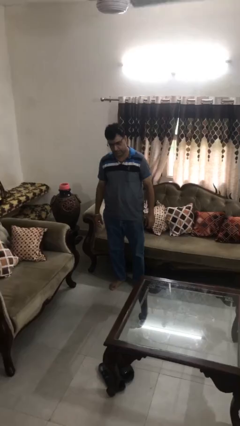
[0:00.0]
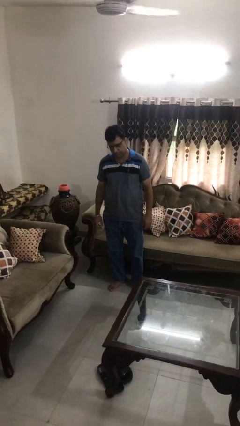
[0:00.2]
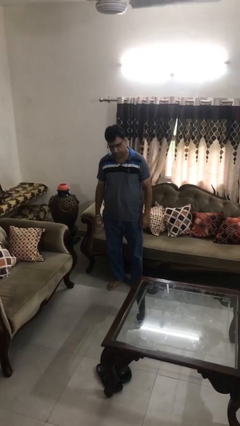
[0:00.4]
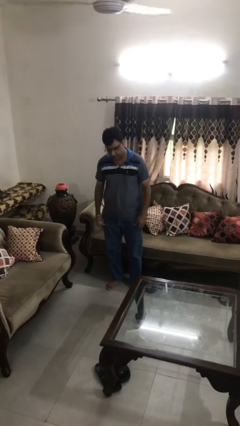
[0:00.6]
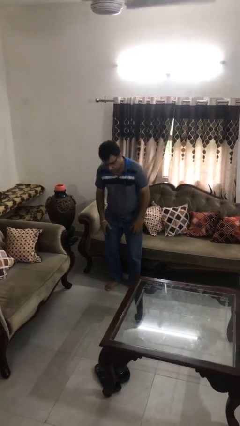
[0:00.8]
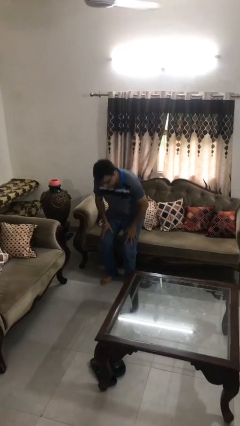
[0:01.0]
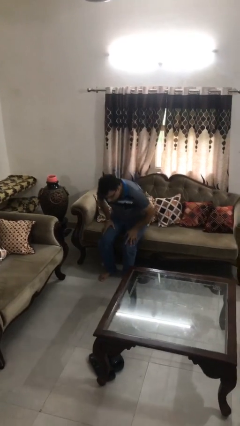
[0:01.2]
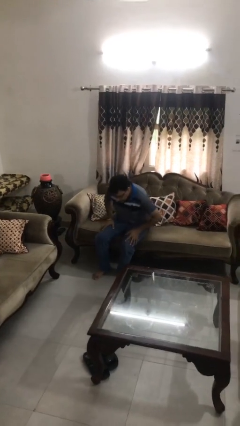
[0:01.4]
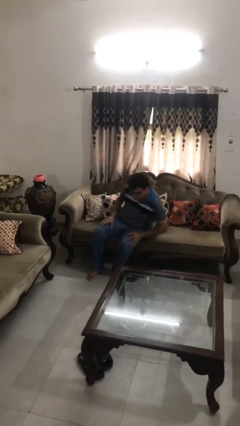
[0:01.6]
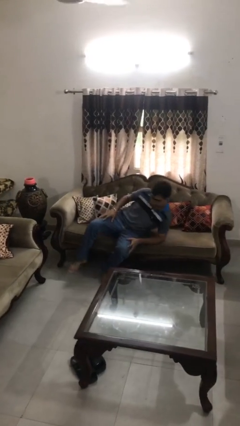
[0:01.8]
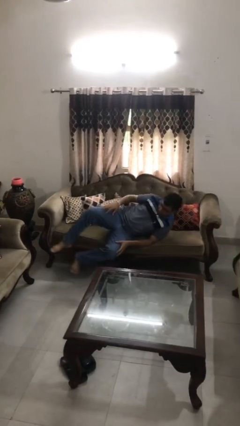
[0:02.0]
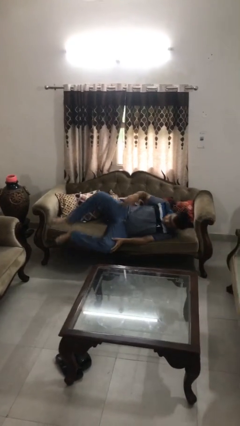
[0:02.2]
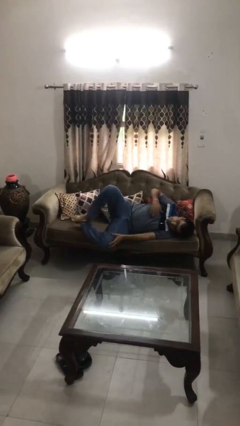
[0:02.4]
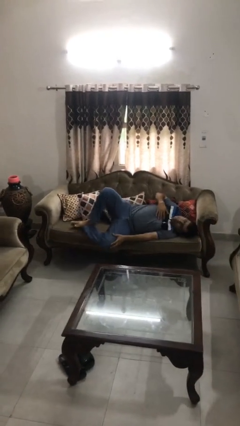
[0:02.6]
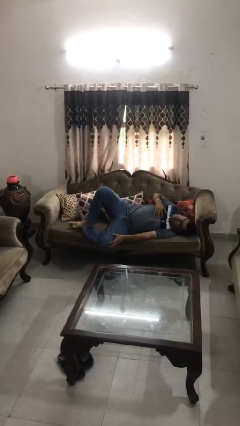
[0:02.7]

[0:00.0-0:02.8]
person lies down on couch

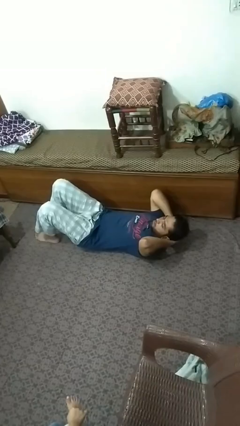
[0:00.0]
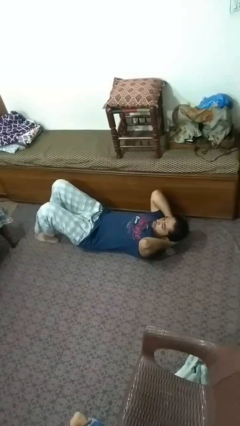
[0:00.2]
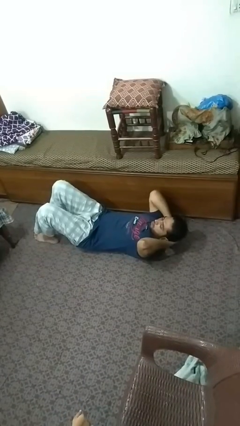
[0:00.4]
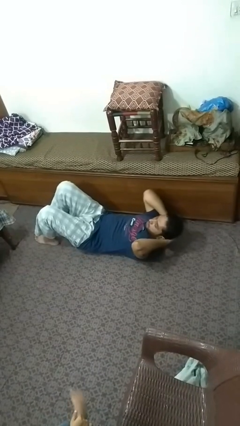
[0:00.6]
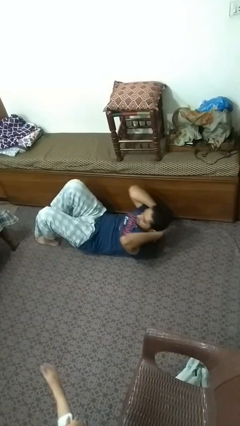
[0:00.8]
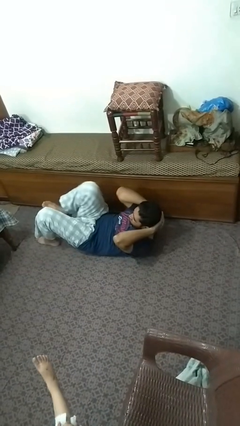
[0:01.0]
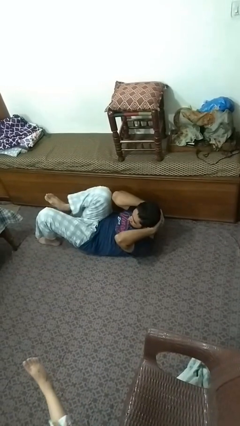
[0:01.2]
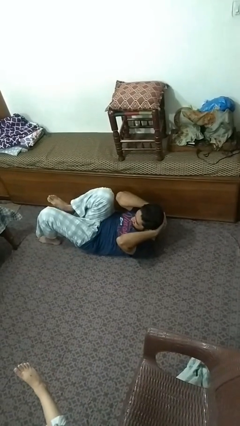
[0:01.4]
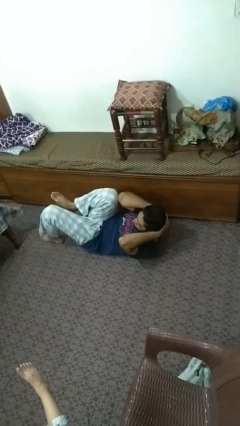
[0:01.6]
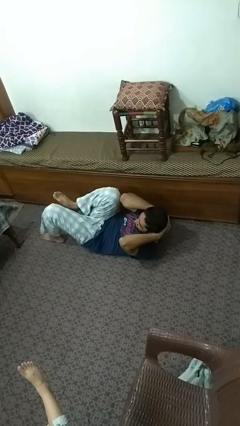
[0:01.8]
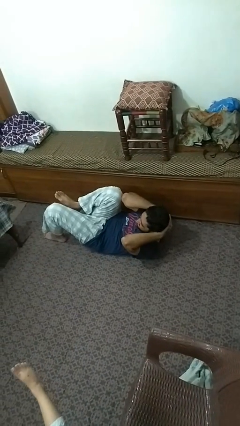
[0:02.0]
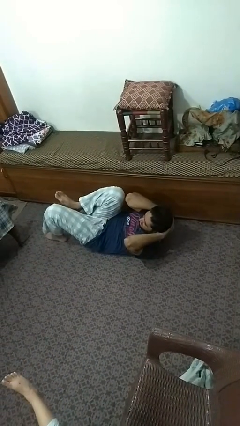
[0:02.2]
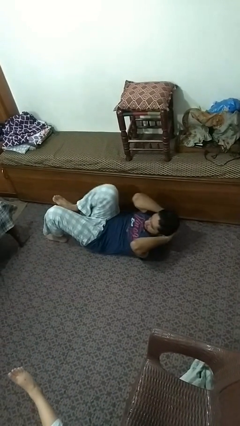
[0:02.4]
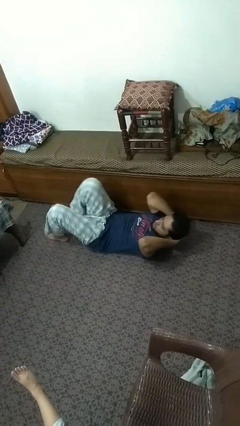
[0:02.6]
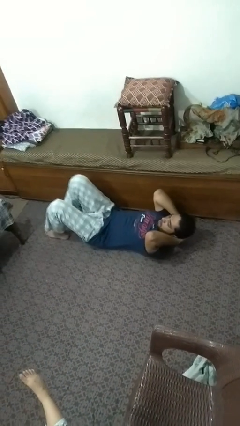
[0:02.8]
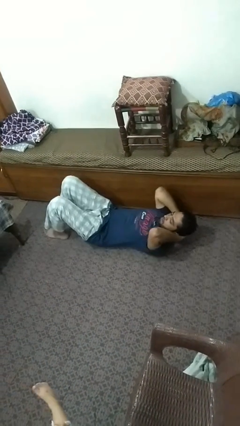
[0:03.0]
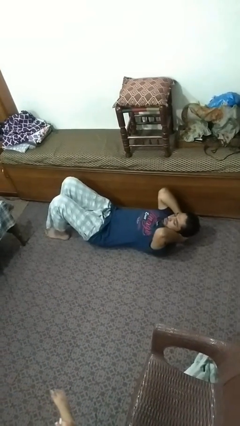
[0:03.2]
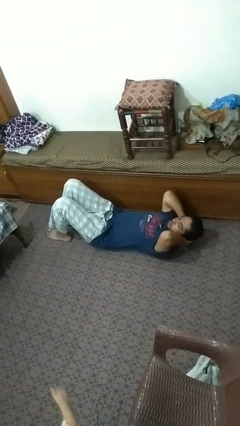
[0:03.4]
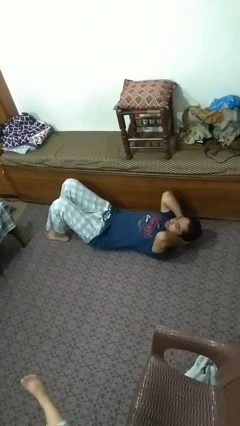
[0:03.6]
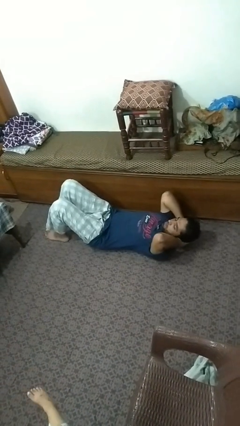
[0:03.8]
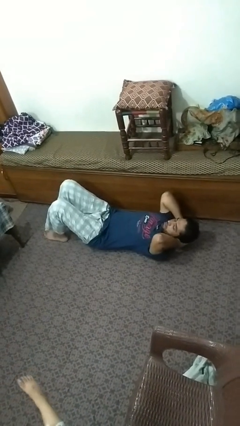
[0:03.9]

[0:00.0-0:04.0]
person exercises with situp

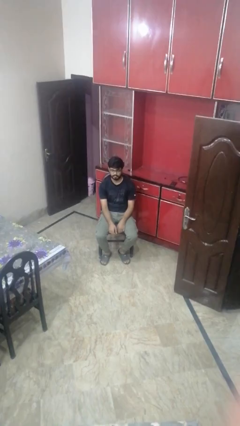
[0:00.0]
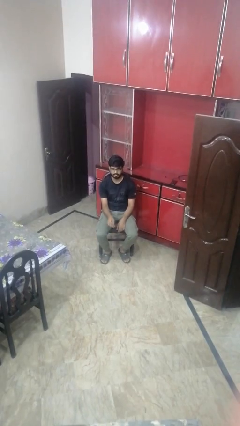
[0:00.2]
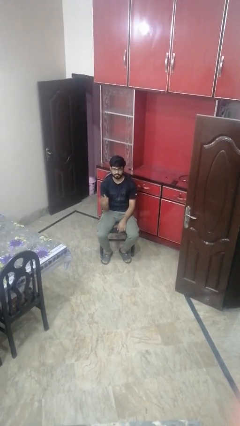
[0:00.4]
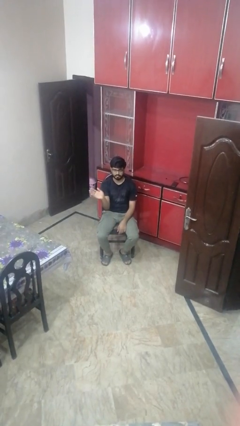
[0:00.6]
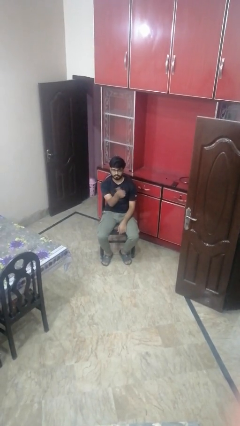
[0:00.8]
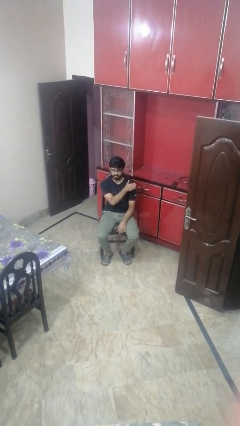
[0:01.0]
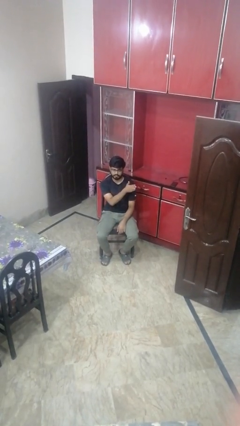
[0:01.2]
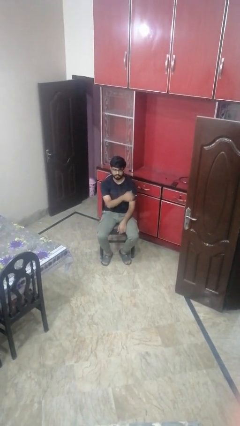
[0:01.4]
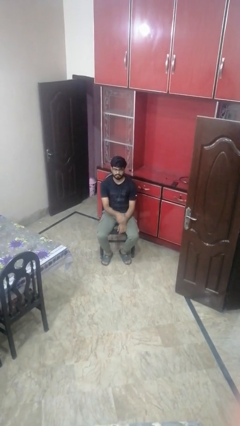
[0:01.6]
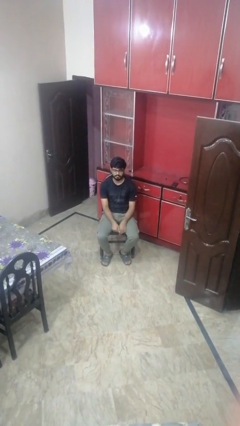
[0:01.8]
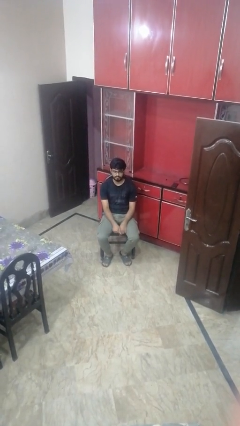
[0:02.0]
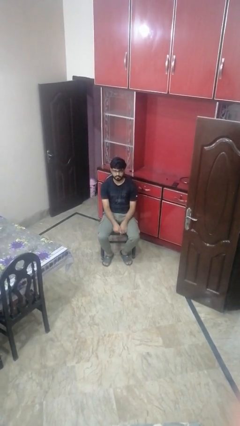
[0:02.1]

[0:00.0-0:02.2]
person gestures swipe left

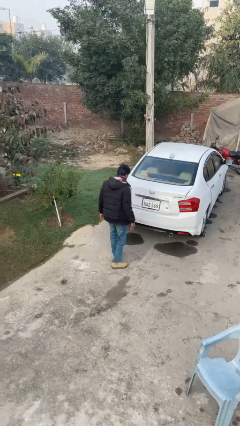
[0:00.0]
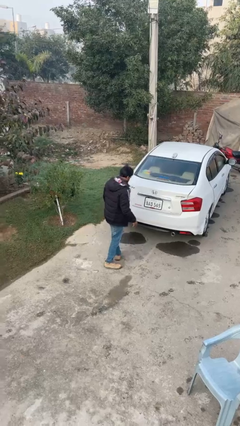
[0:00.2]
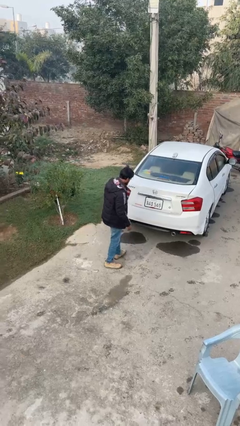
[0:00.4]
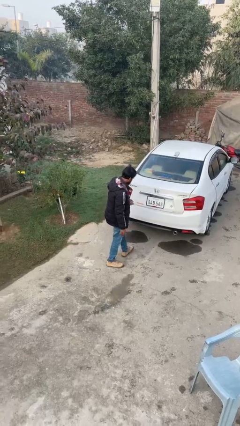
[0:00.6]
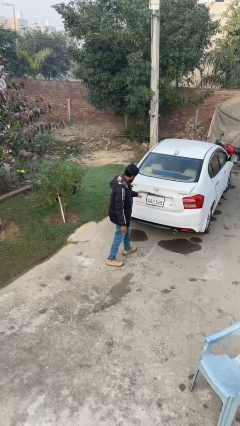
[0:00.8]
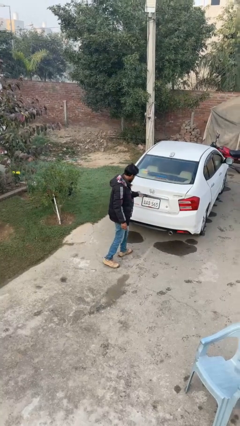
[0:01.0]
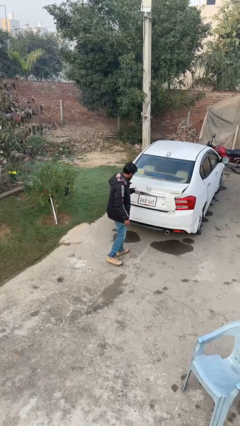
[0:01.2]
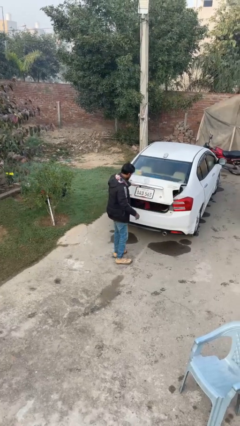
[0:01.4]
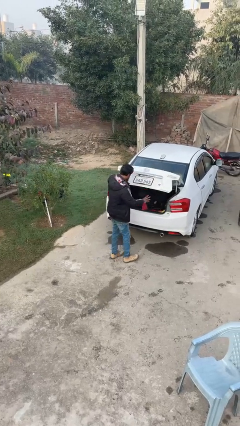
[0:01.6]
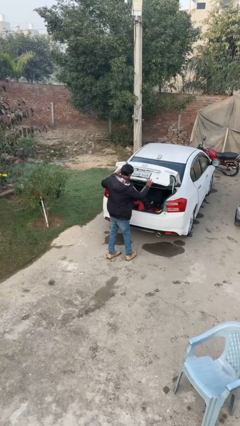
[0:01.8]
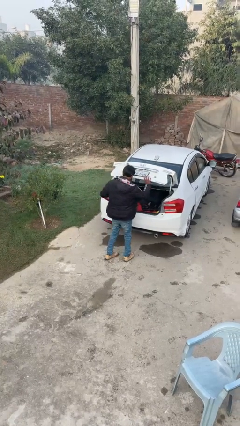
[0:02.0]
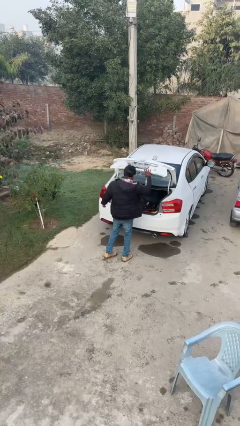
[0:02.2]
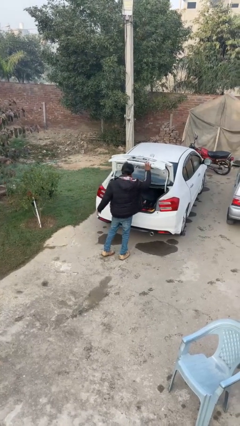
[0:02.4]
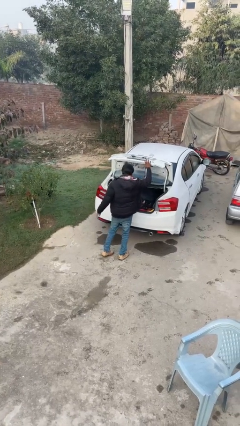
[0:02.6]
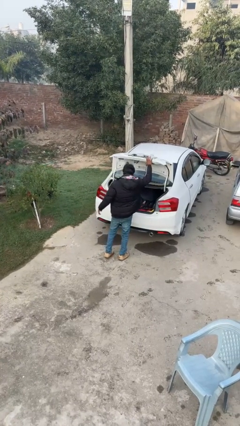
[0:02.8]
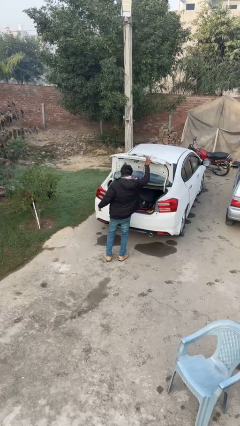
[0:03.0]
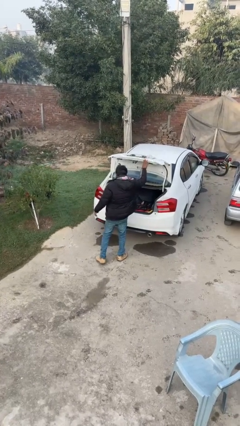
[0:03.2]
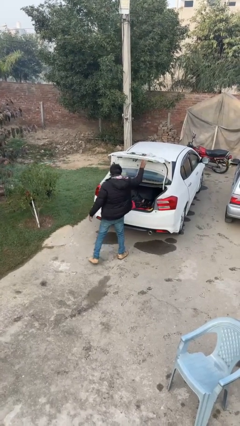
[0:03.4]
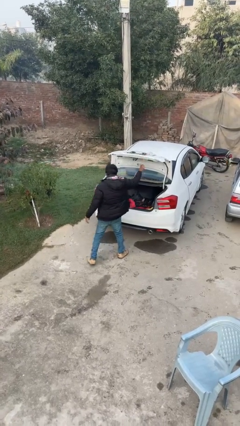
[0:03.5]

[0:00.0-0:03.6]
person opens car trunk

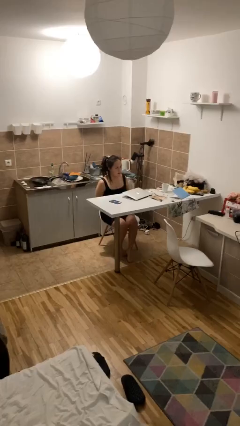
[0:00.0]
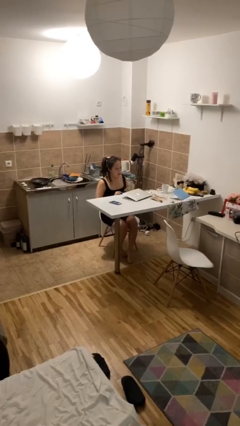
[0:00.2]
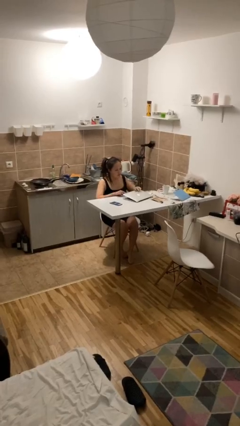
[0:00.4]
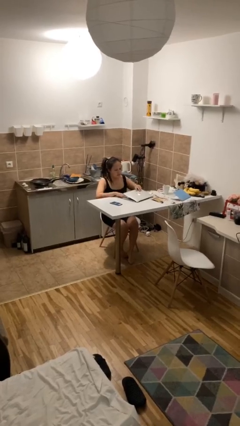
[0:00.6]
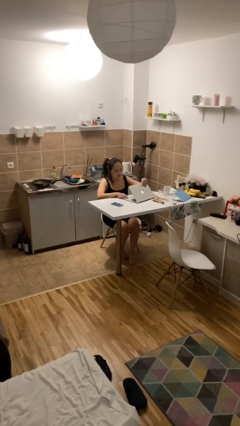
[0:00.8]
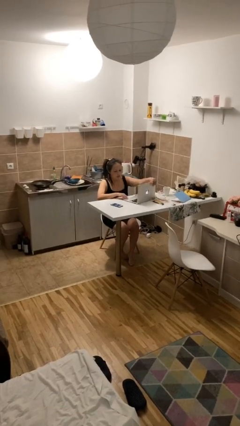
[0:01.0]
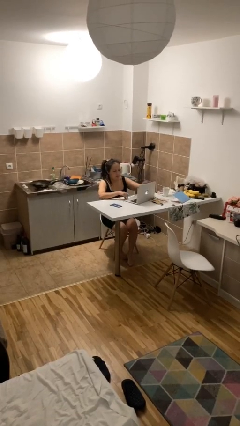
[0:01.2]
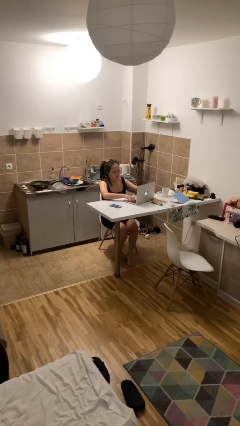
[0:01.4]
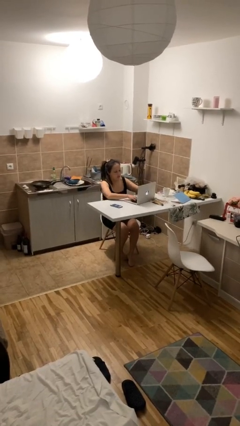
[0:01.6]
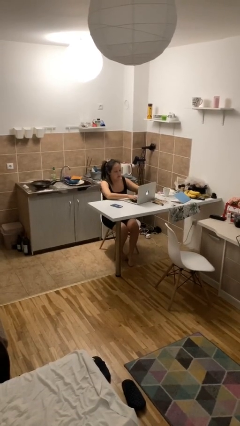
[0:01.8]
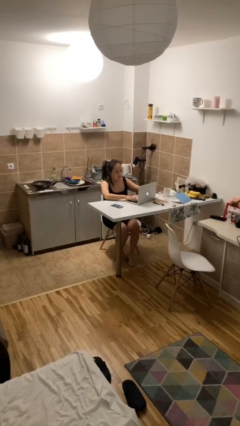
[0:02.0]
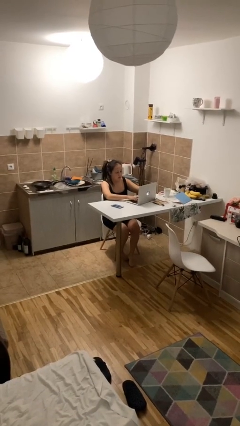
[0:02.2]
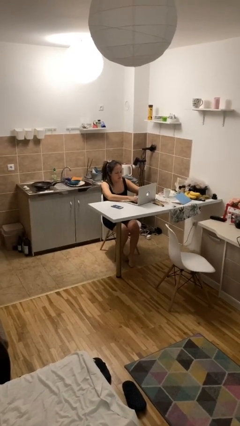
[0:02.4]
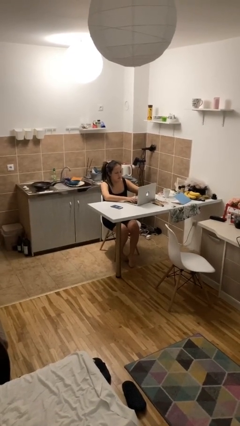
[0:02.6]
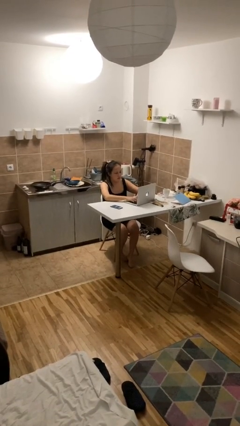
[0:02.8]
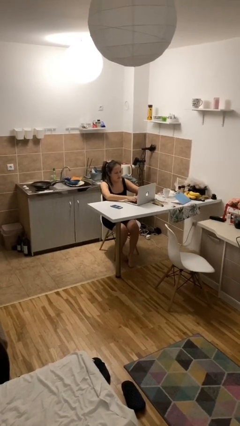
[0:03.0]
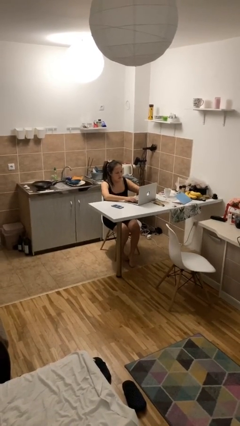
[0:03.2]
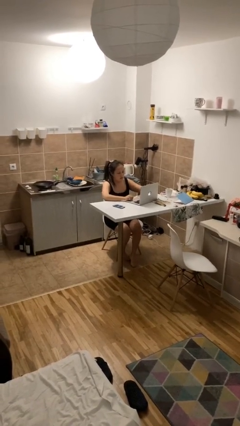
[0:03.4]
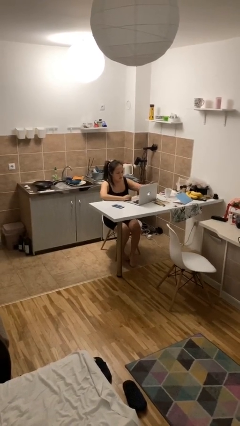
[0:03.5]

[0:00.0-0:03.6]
person interacts with laptop

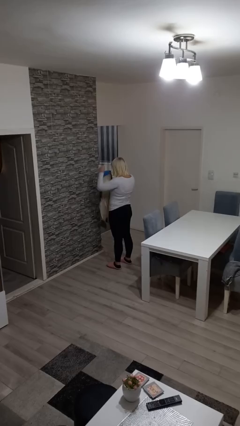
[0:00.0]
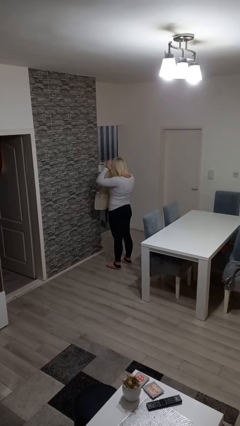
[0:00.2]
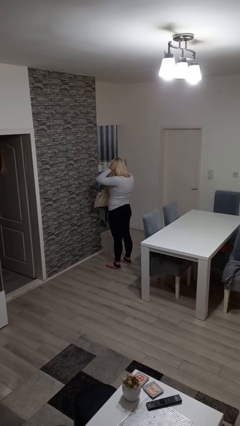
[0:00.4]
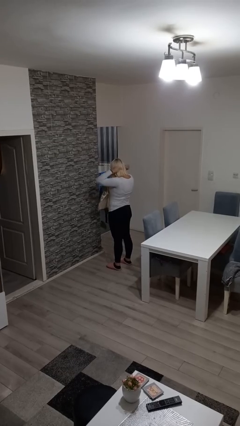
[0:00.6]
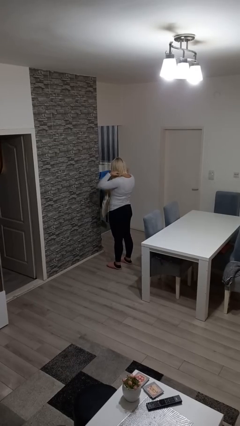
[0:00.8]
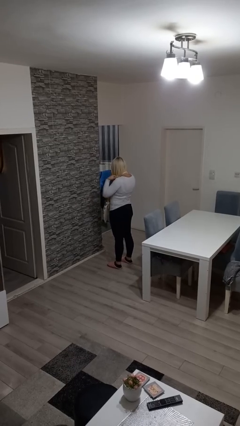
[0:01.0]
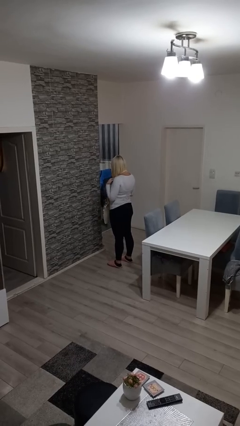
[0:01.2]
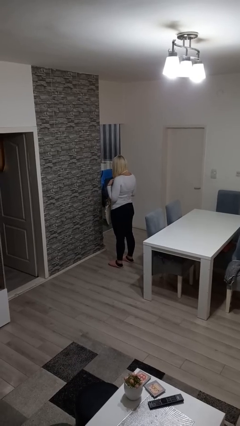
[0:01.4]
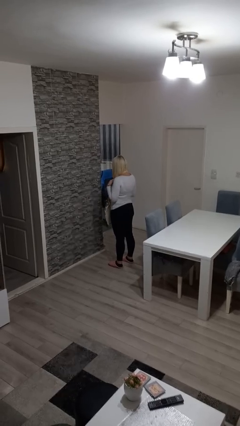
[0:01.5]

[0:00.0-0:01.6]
person puts on apron
